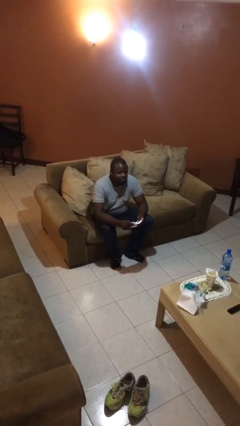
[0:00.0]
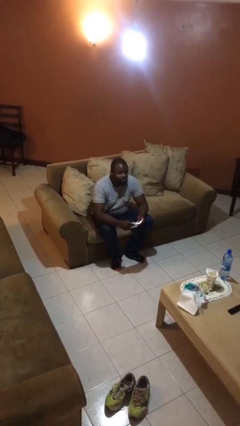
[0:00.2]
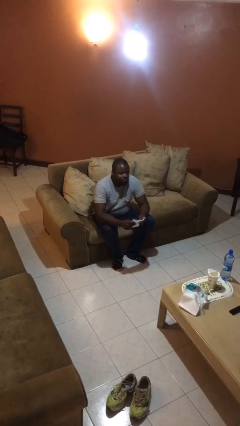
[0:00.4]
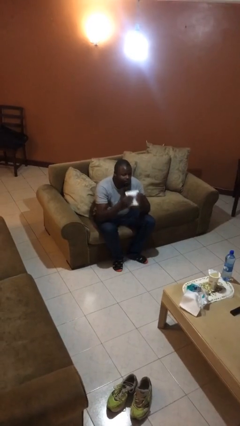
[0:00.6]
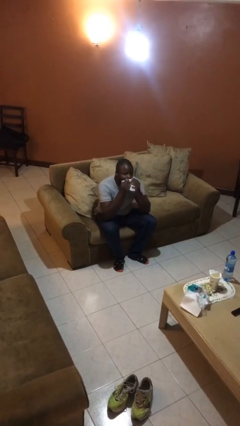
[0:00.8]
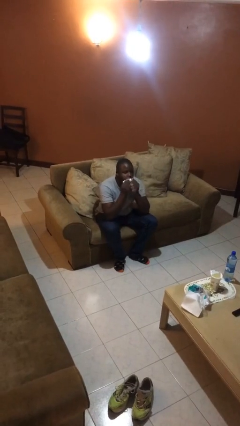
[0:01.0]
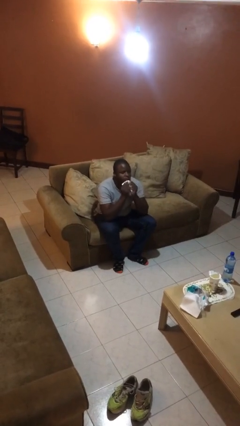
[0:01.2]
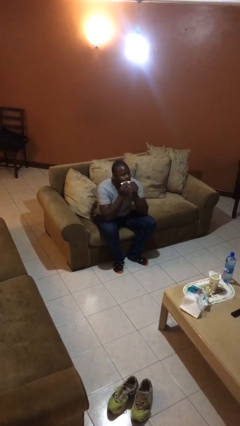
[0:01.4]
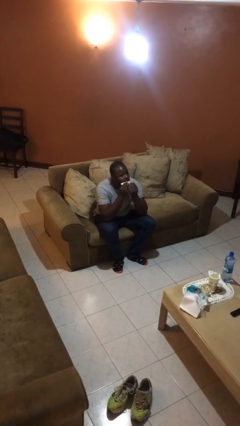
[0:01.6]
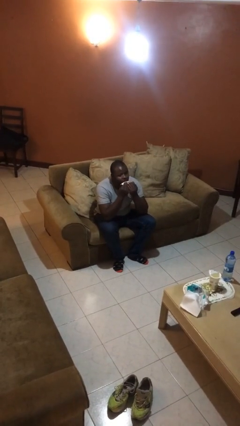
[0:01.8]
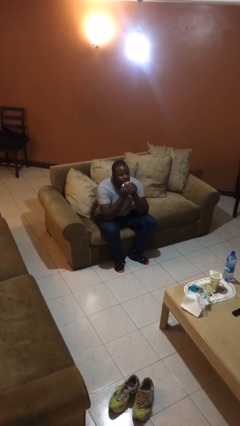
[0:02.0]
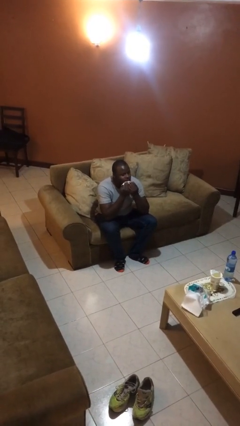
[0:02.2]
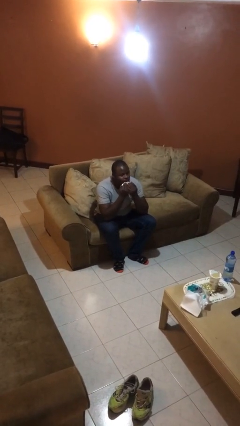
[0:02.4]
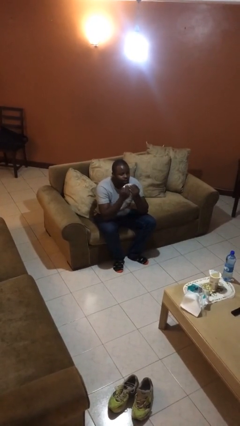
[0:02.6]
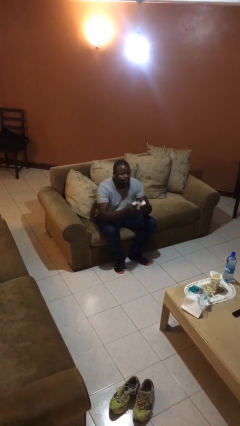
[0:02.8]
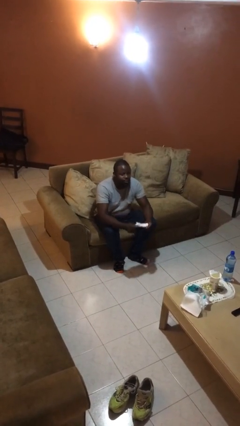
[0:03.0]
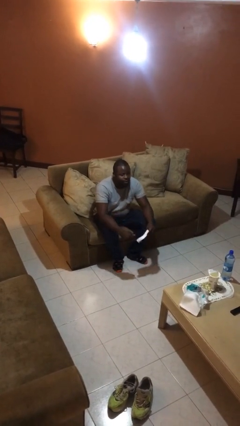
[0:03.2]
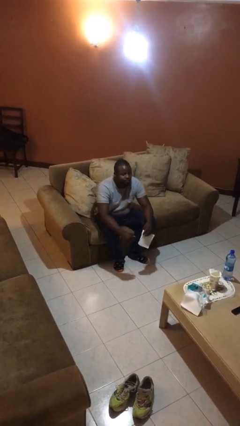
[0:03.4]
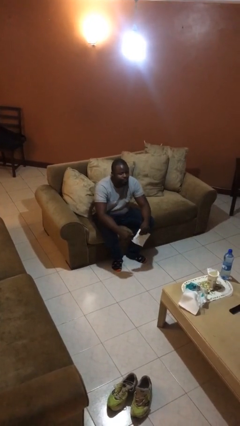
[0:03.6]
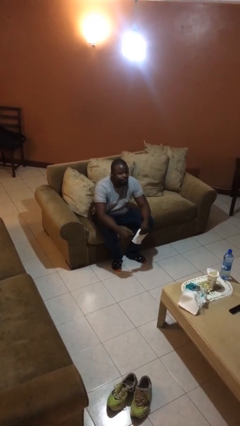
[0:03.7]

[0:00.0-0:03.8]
person wipes mouth with napkin

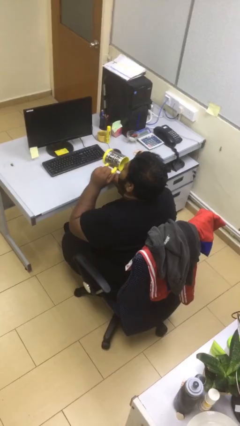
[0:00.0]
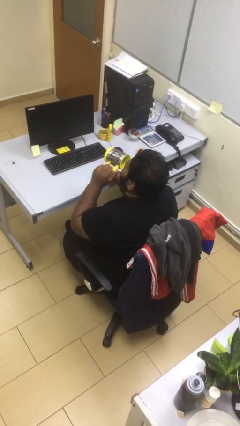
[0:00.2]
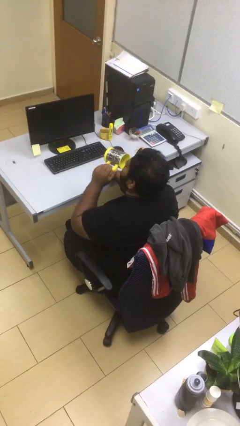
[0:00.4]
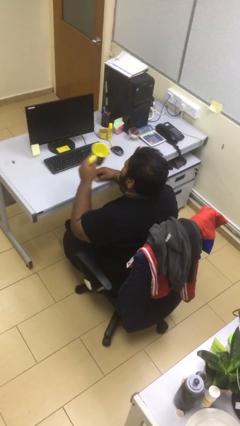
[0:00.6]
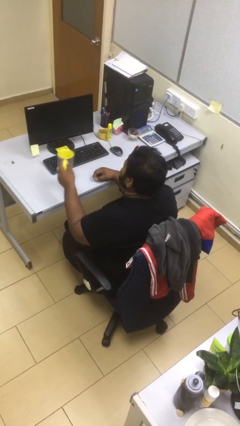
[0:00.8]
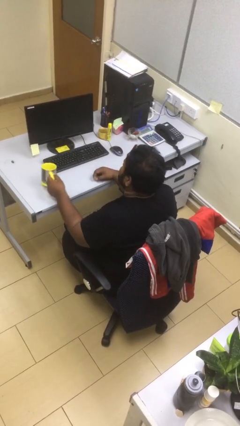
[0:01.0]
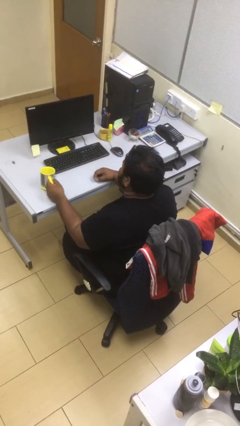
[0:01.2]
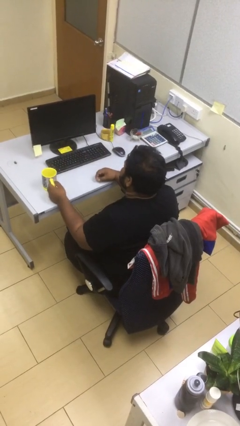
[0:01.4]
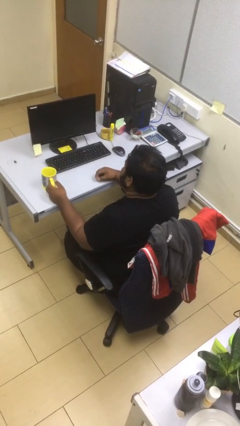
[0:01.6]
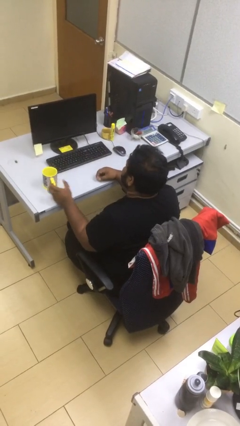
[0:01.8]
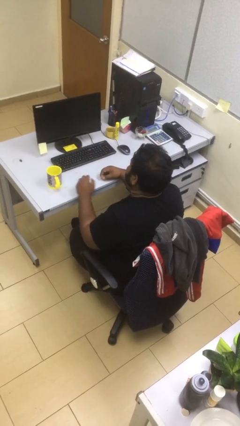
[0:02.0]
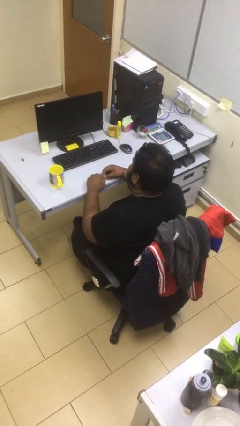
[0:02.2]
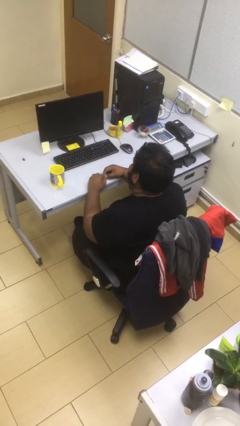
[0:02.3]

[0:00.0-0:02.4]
person puts down object on table

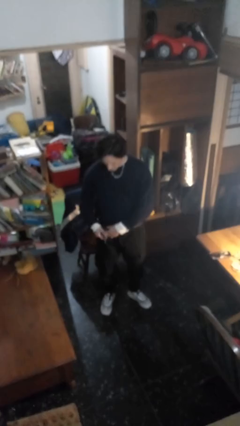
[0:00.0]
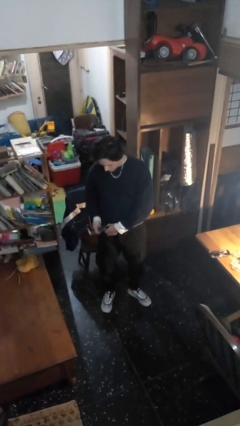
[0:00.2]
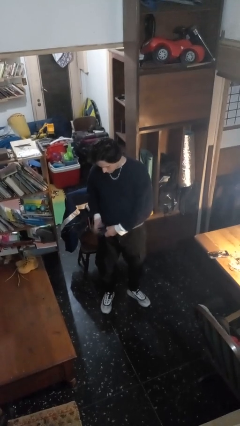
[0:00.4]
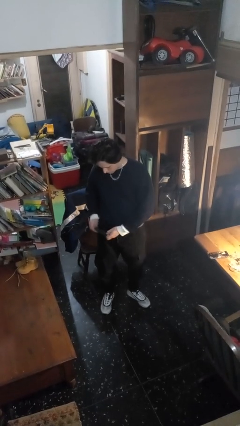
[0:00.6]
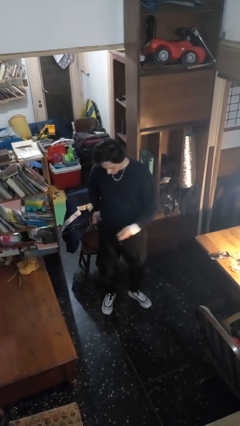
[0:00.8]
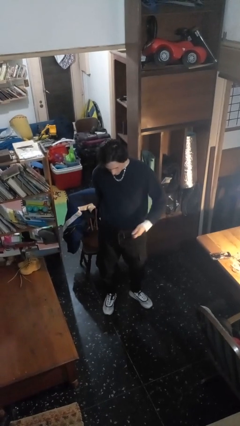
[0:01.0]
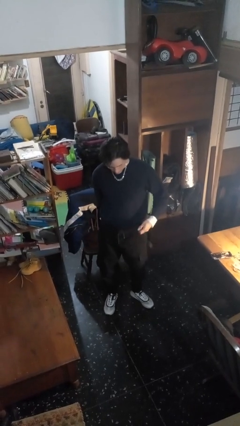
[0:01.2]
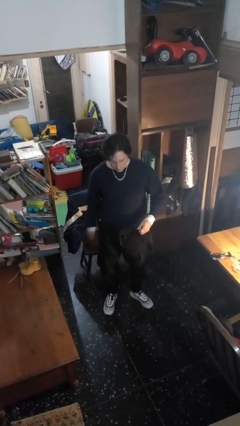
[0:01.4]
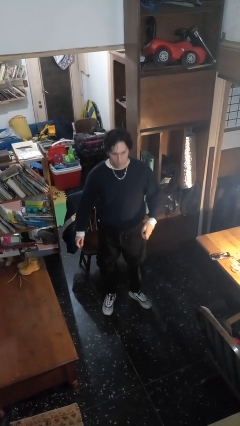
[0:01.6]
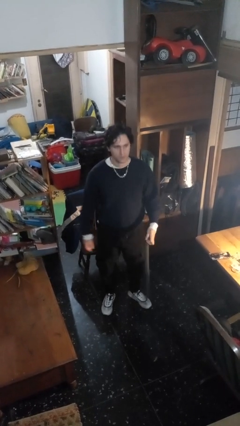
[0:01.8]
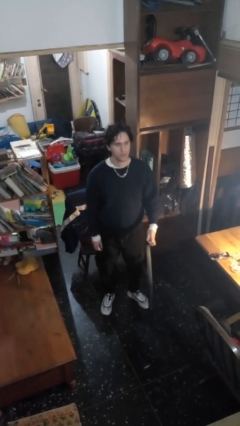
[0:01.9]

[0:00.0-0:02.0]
person takes off belt

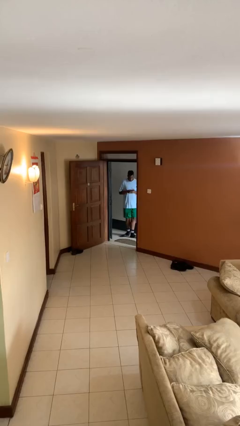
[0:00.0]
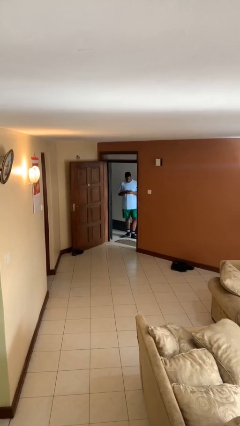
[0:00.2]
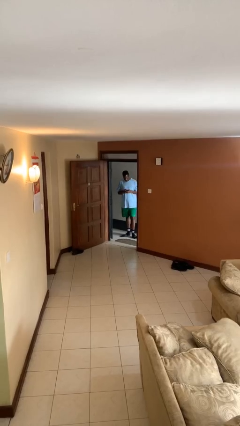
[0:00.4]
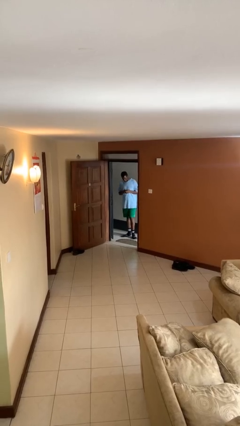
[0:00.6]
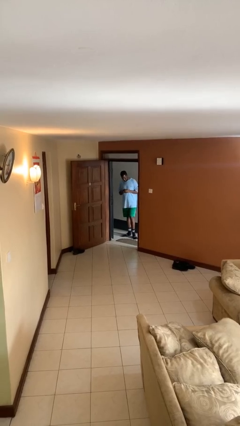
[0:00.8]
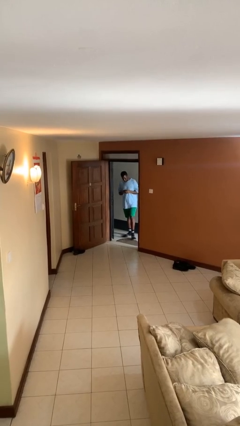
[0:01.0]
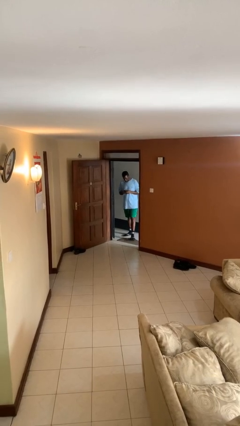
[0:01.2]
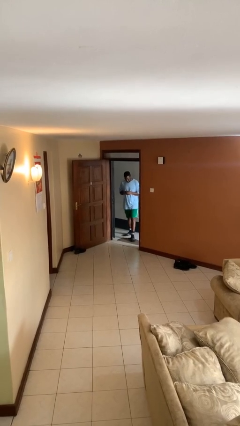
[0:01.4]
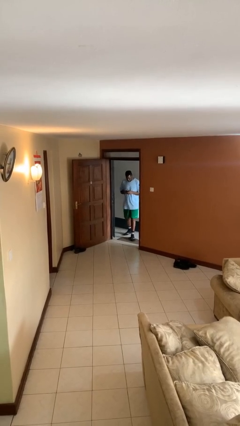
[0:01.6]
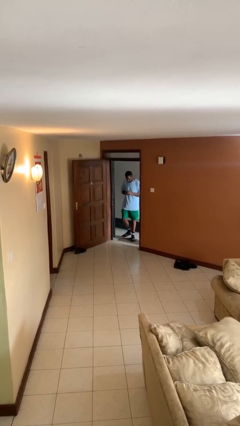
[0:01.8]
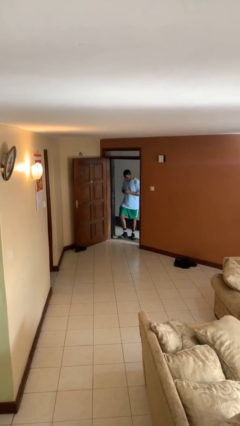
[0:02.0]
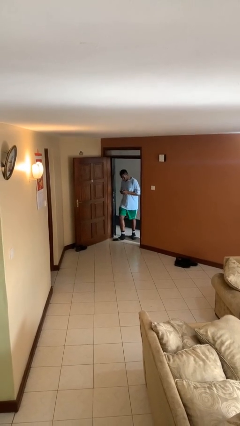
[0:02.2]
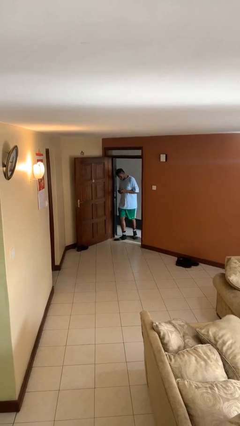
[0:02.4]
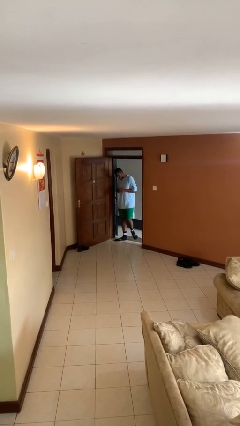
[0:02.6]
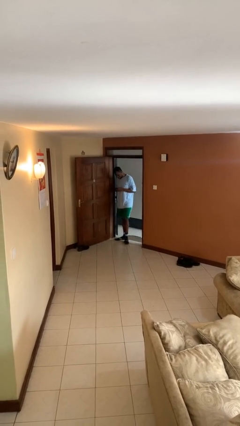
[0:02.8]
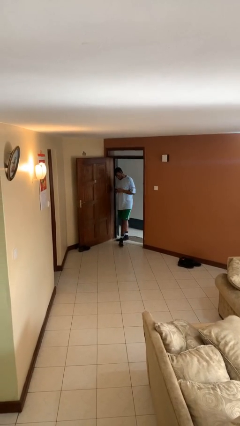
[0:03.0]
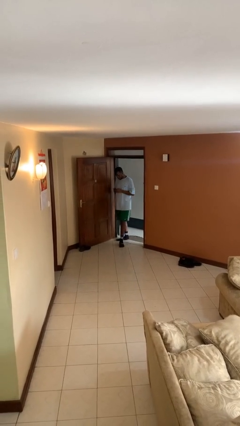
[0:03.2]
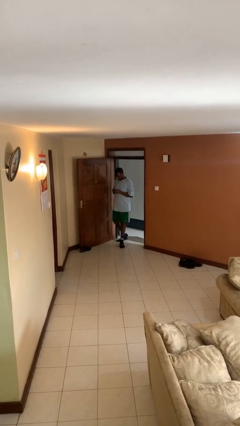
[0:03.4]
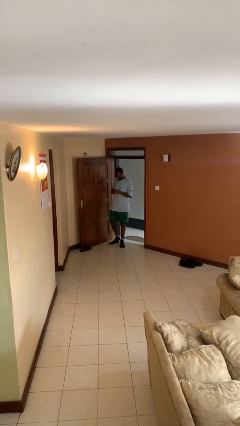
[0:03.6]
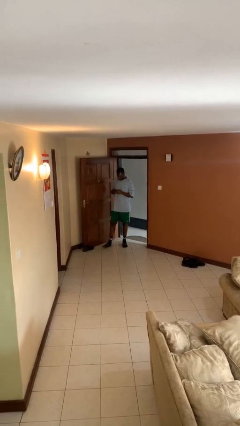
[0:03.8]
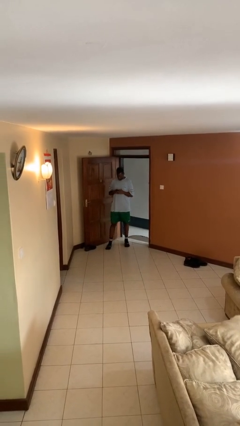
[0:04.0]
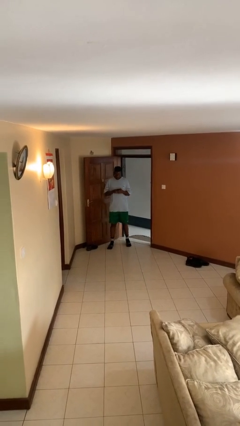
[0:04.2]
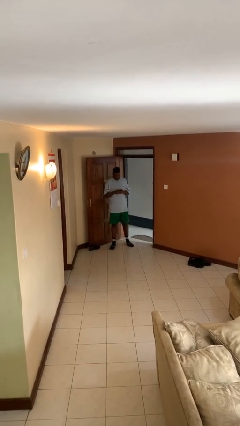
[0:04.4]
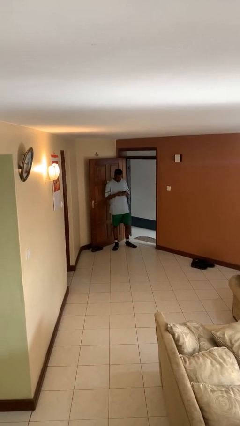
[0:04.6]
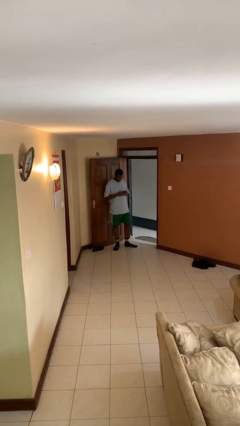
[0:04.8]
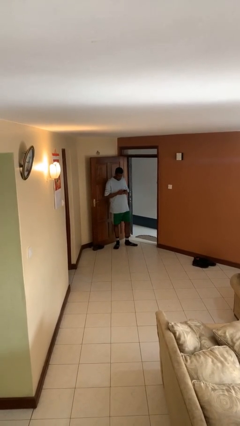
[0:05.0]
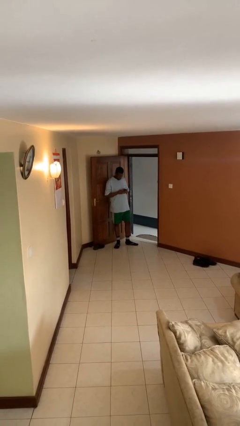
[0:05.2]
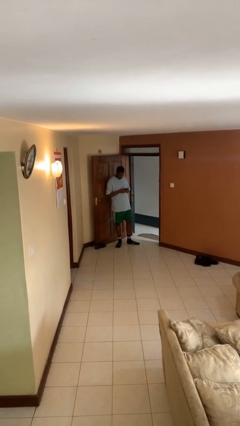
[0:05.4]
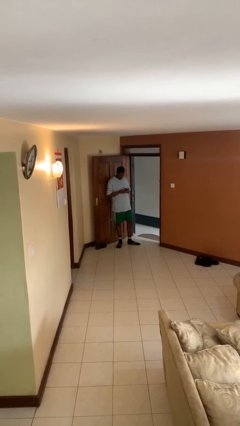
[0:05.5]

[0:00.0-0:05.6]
person enters scene through structure

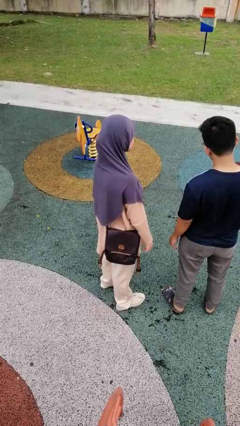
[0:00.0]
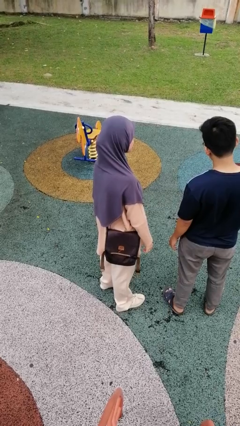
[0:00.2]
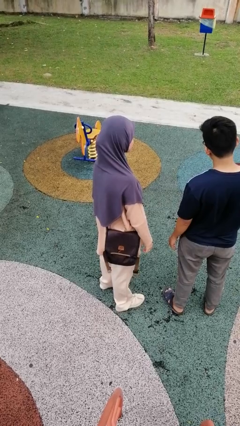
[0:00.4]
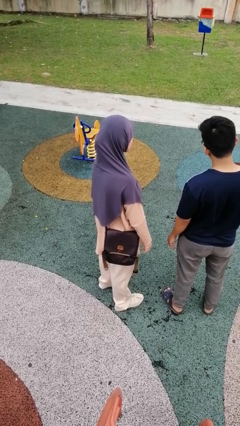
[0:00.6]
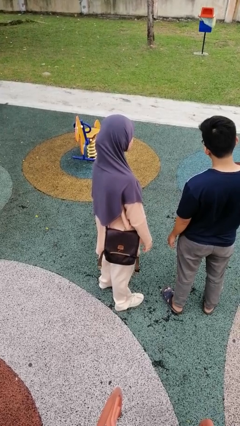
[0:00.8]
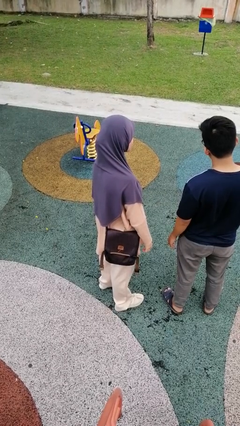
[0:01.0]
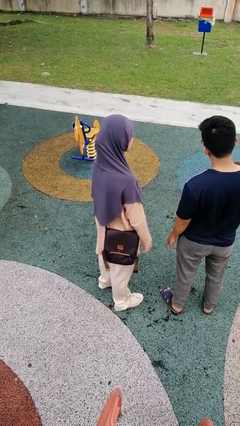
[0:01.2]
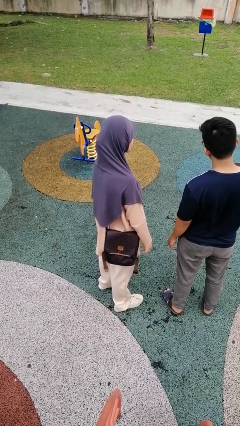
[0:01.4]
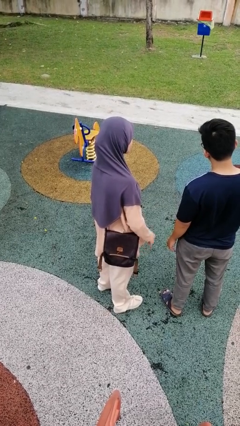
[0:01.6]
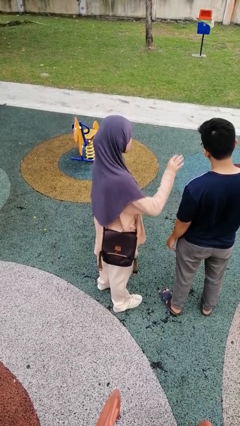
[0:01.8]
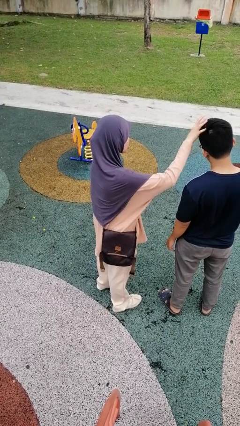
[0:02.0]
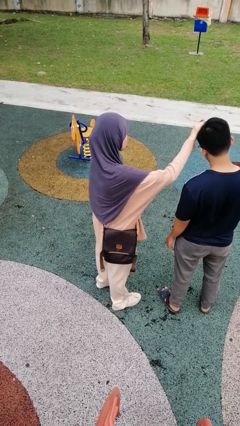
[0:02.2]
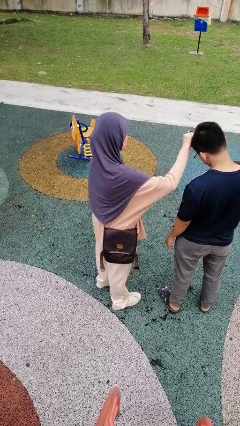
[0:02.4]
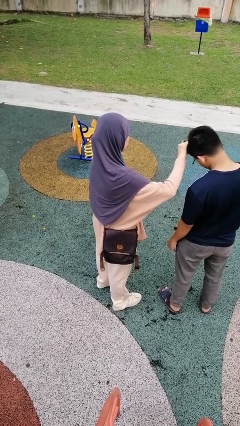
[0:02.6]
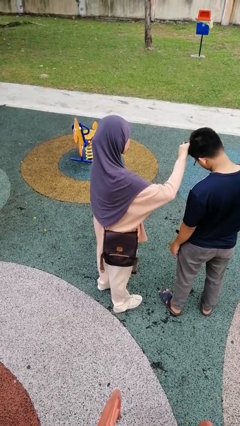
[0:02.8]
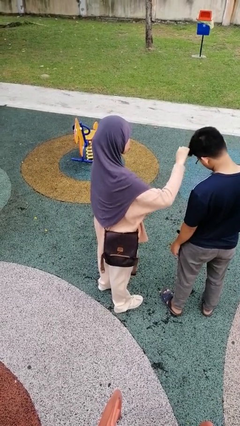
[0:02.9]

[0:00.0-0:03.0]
person grabs person by hair

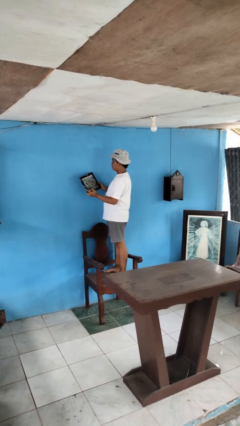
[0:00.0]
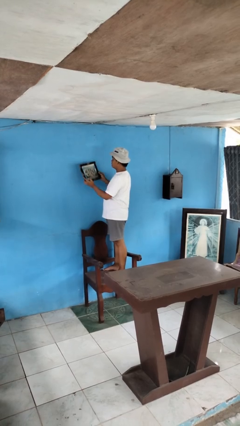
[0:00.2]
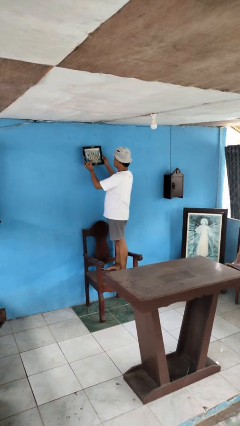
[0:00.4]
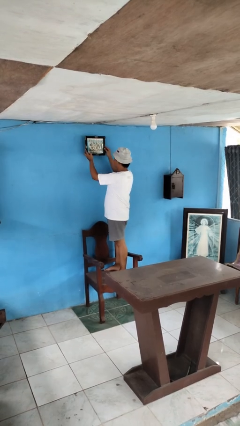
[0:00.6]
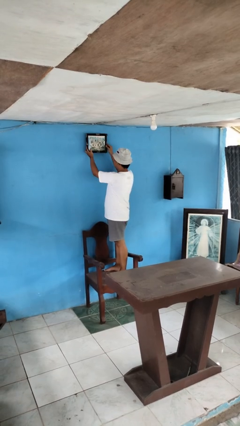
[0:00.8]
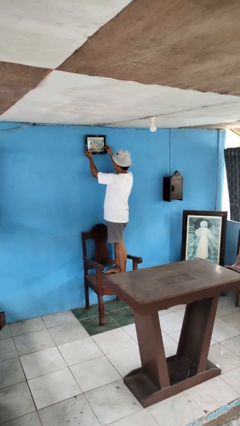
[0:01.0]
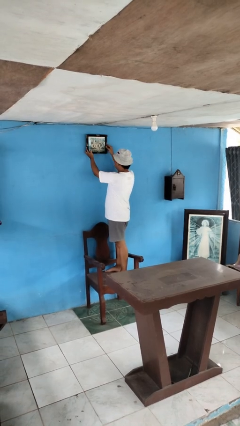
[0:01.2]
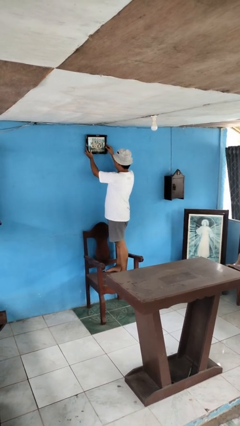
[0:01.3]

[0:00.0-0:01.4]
person puts up picture frame
